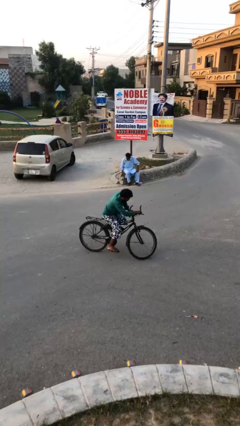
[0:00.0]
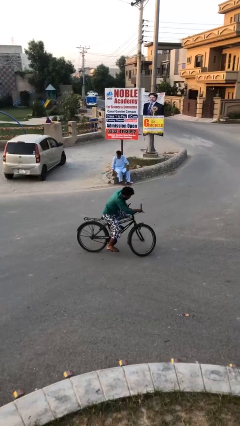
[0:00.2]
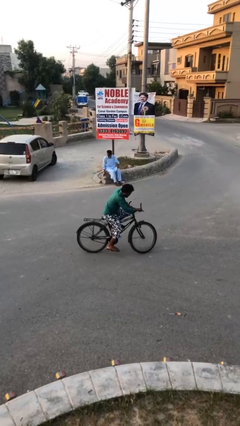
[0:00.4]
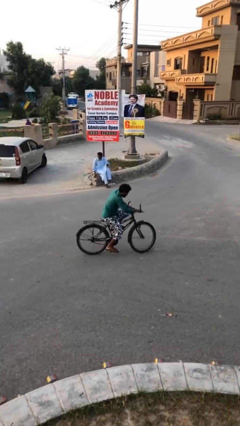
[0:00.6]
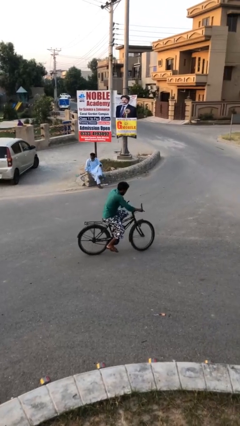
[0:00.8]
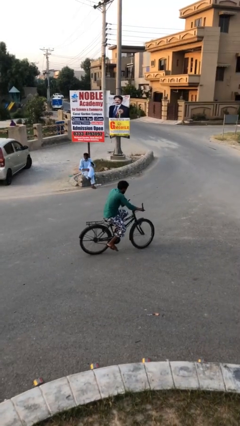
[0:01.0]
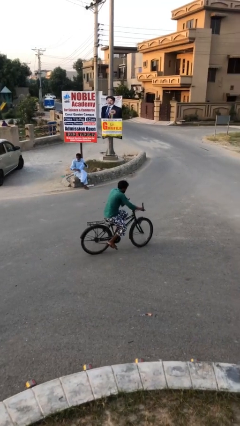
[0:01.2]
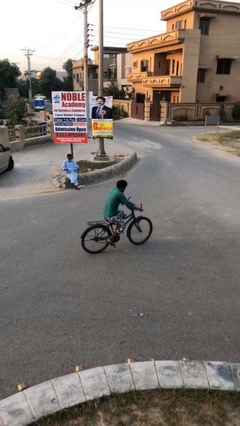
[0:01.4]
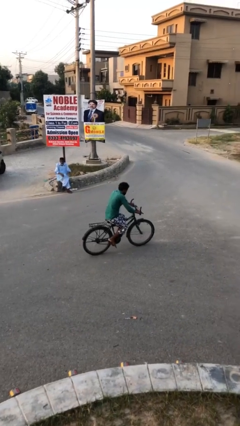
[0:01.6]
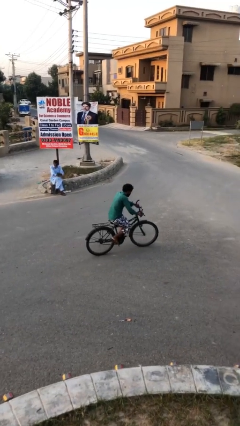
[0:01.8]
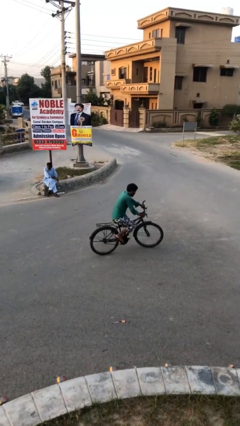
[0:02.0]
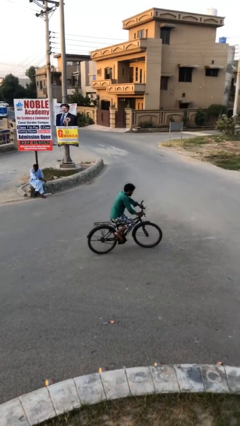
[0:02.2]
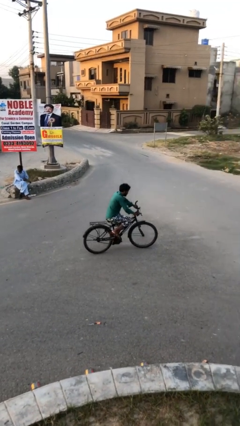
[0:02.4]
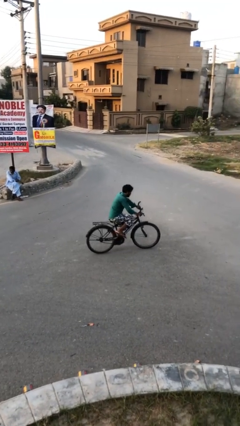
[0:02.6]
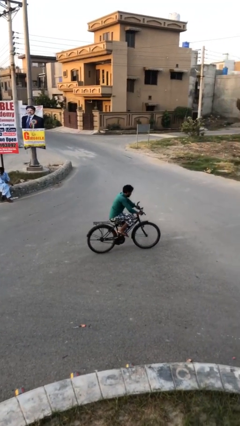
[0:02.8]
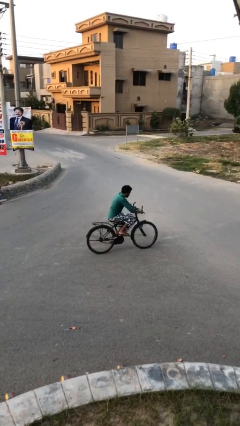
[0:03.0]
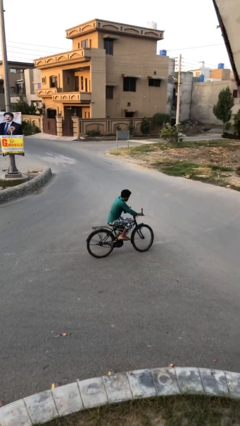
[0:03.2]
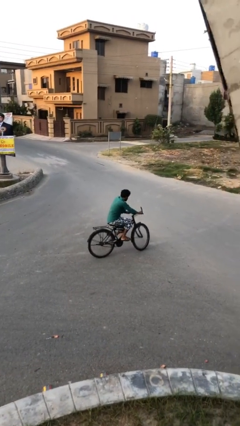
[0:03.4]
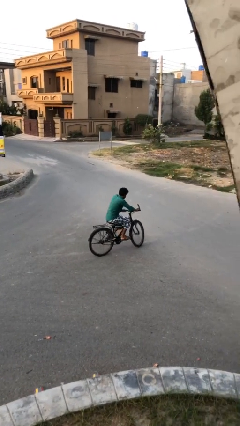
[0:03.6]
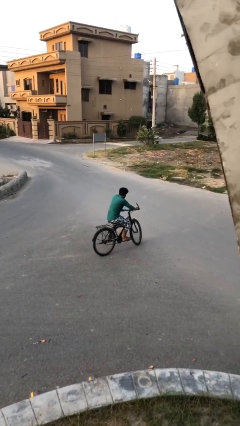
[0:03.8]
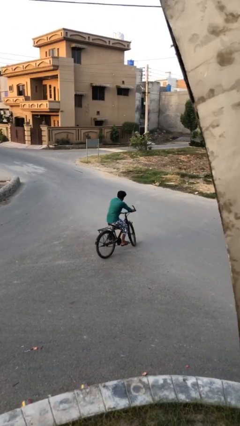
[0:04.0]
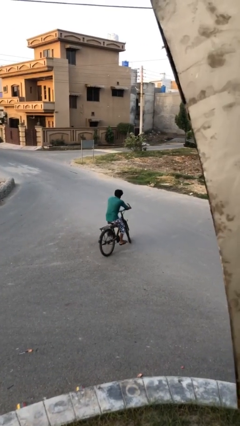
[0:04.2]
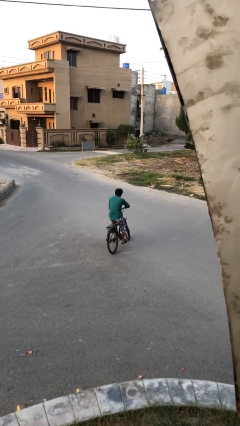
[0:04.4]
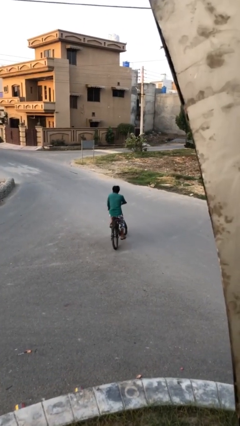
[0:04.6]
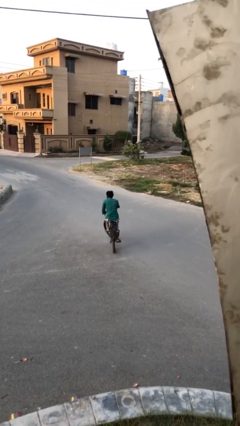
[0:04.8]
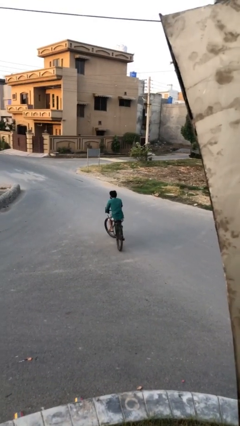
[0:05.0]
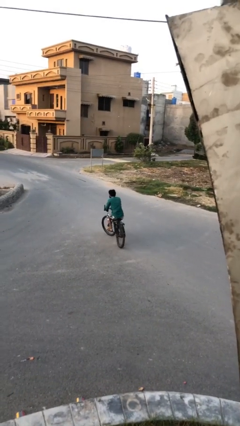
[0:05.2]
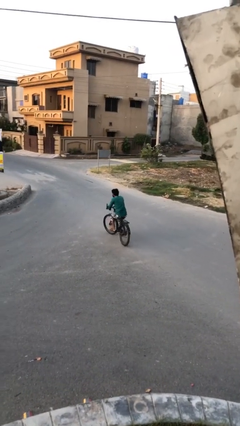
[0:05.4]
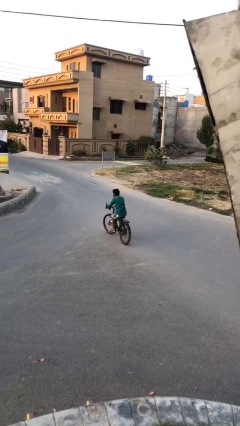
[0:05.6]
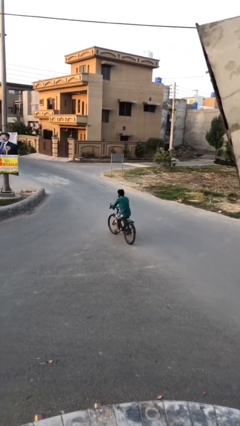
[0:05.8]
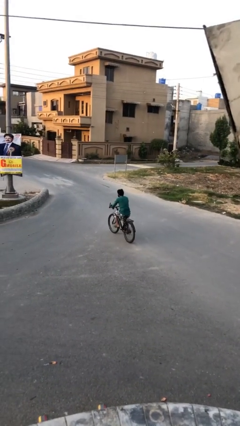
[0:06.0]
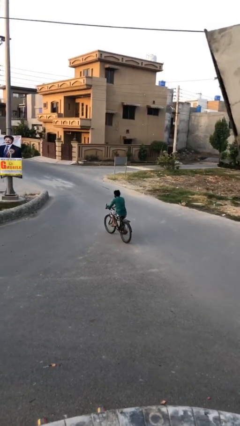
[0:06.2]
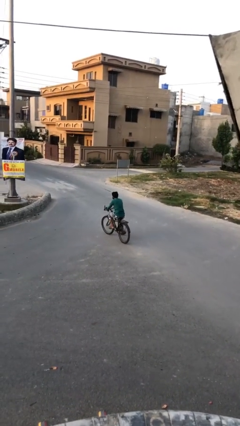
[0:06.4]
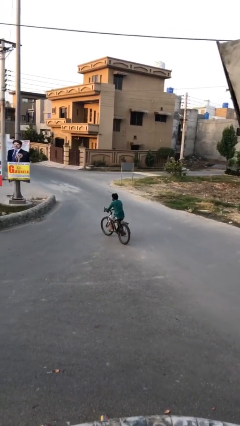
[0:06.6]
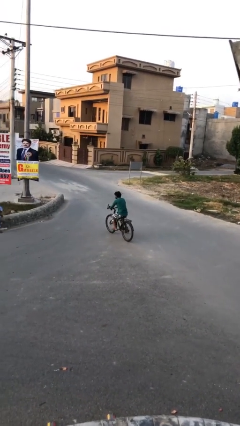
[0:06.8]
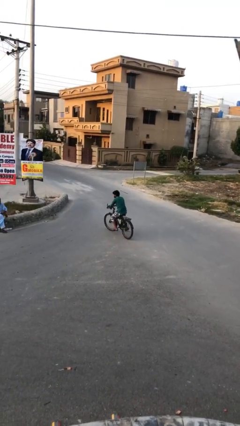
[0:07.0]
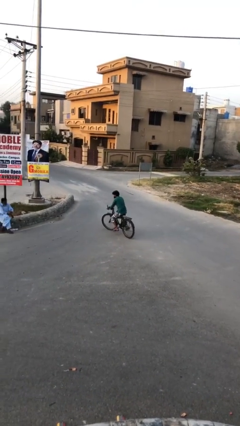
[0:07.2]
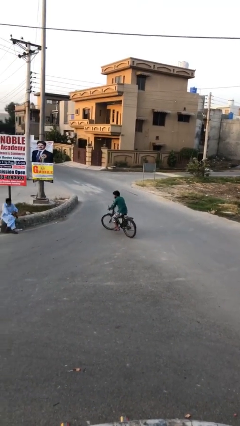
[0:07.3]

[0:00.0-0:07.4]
person rides bicycle

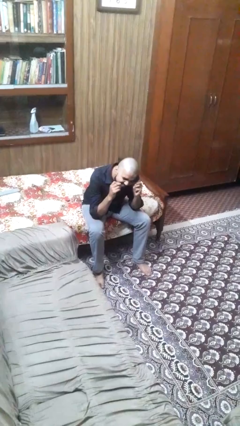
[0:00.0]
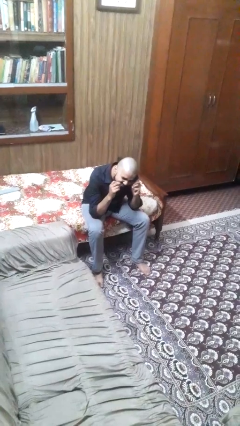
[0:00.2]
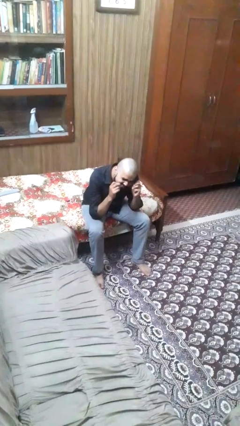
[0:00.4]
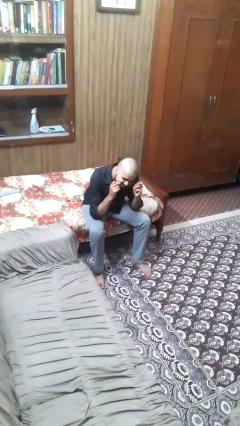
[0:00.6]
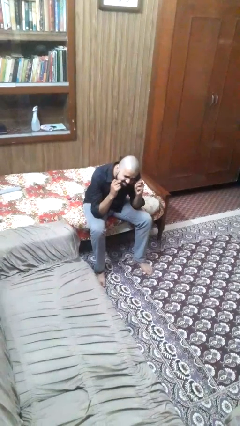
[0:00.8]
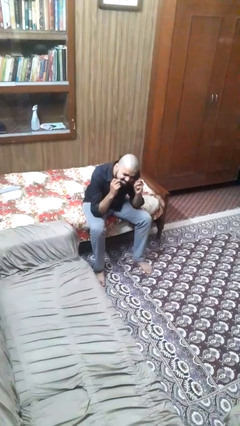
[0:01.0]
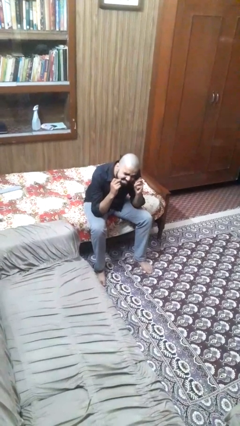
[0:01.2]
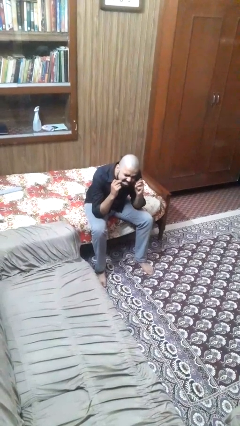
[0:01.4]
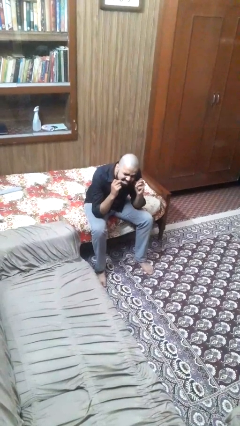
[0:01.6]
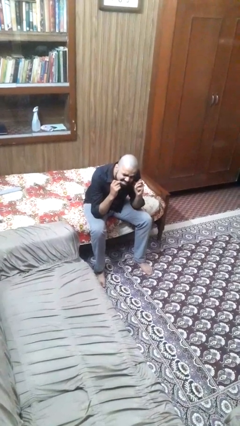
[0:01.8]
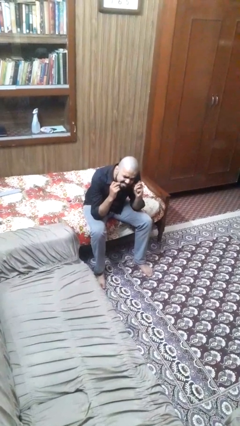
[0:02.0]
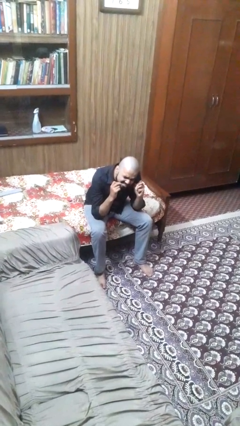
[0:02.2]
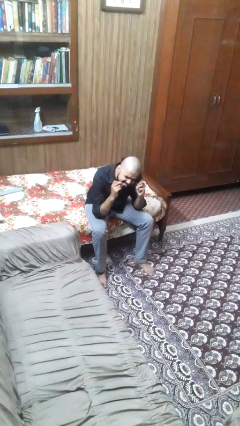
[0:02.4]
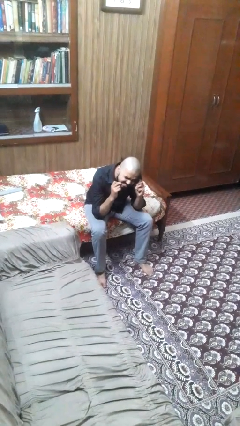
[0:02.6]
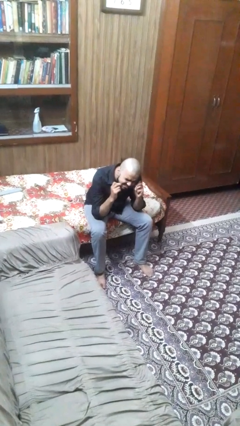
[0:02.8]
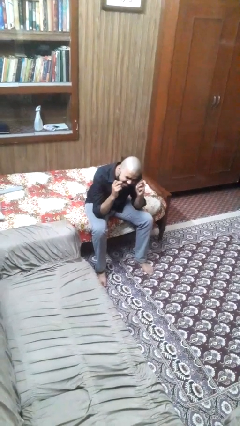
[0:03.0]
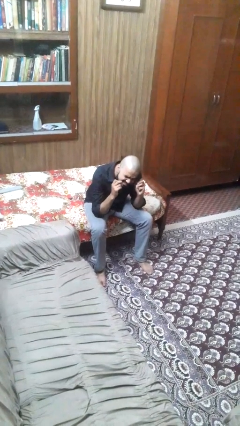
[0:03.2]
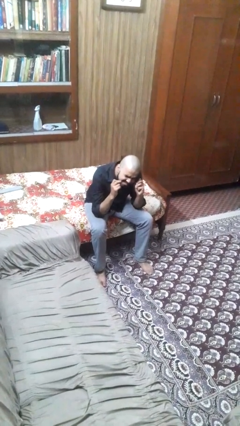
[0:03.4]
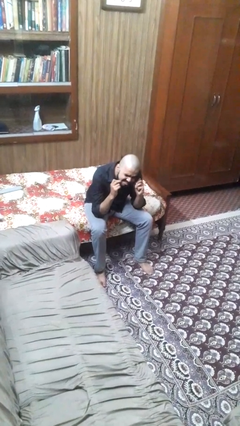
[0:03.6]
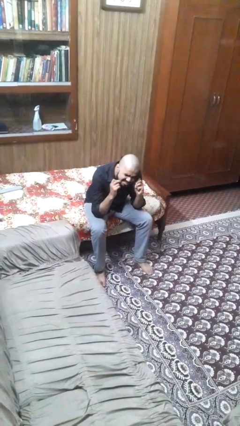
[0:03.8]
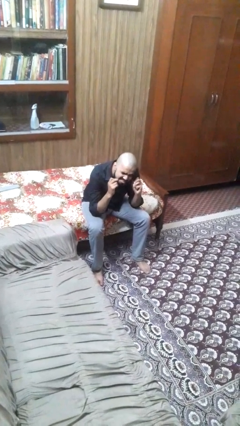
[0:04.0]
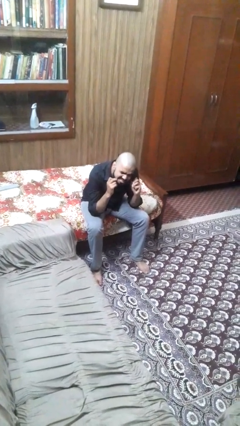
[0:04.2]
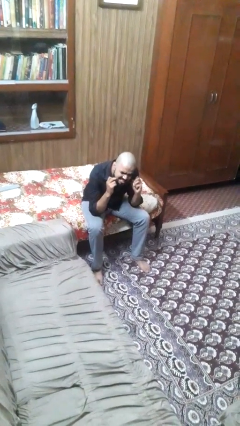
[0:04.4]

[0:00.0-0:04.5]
person flosses

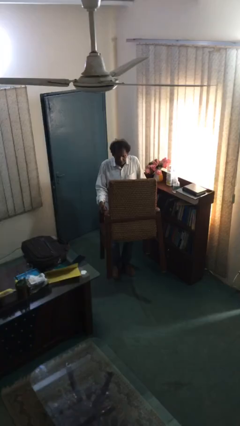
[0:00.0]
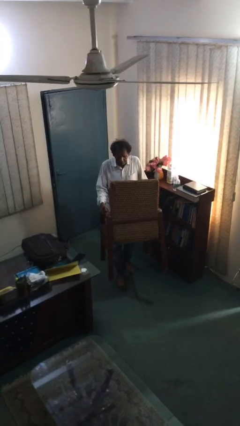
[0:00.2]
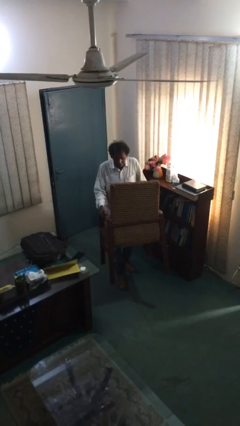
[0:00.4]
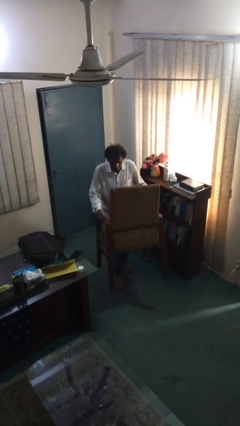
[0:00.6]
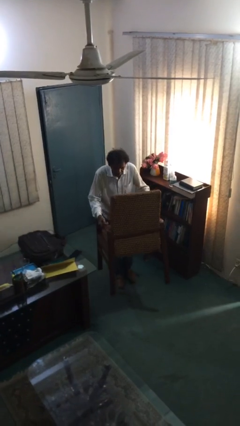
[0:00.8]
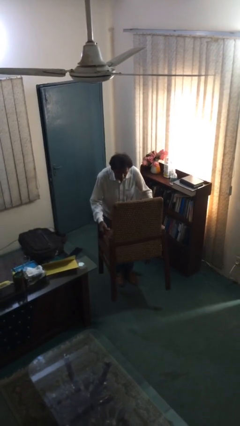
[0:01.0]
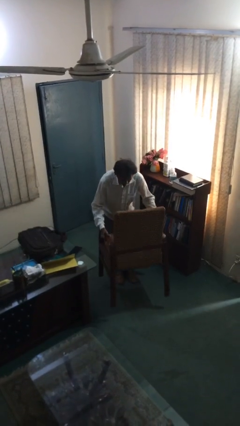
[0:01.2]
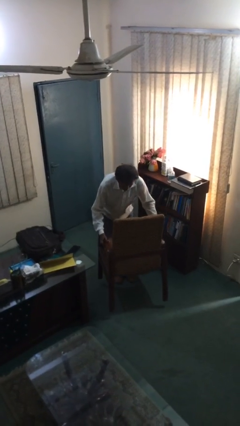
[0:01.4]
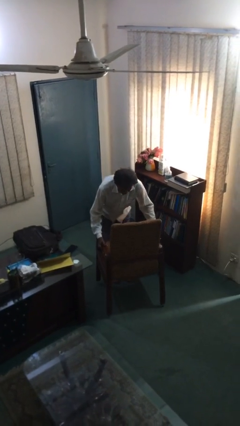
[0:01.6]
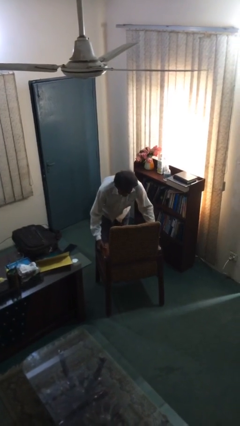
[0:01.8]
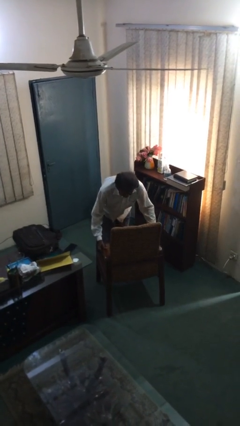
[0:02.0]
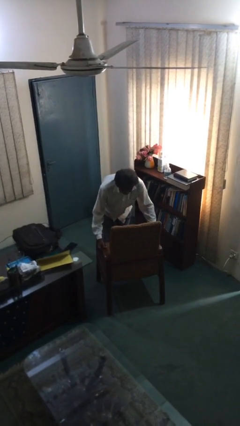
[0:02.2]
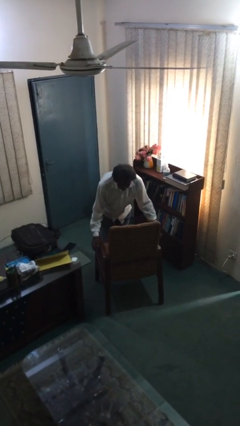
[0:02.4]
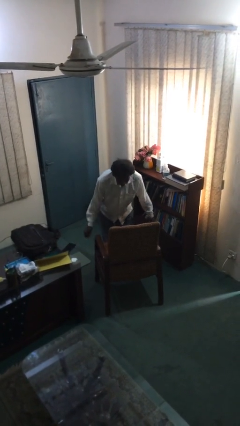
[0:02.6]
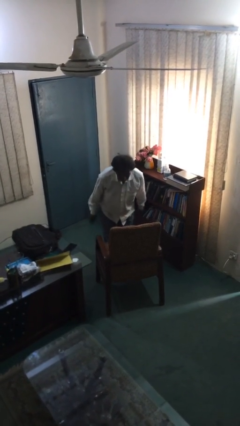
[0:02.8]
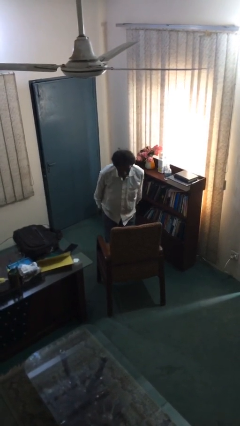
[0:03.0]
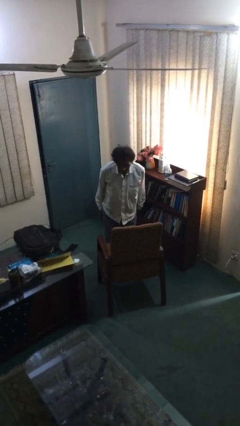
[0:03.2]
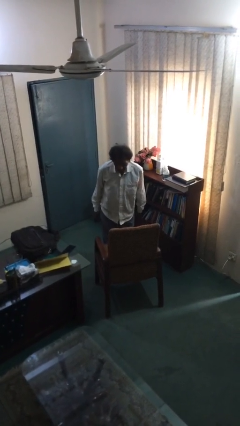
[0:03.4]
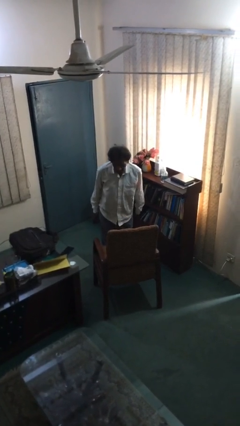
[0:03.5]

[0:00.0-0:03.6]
person puts down object on floor

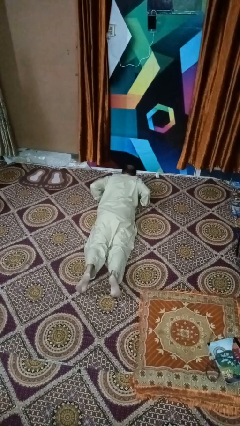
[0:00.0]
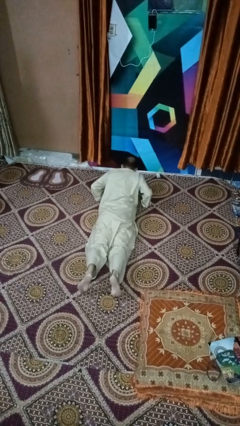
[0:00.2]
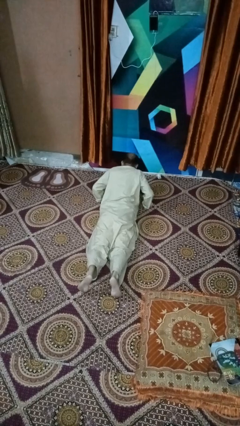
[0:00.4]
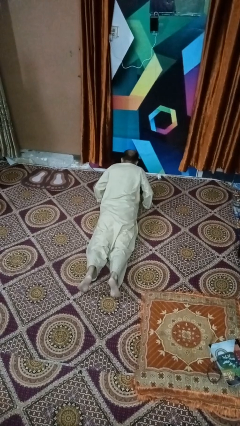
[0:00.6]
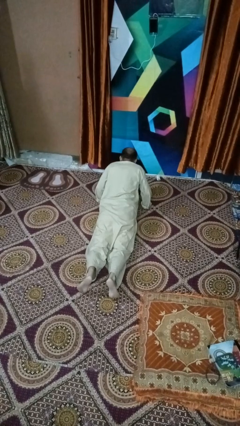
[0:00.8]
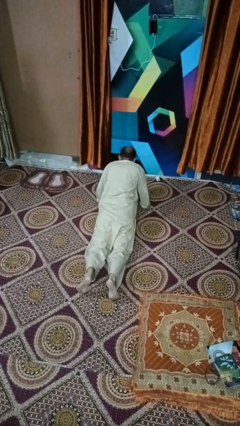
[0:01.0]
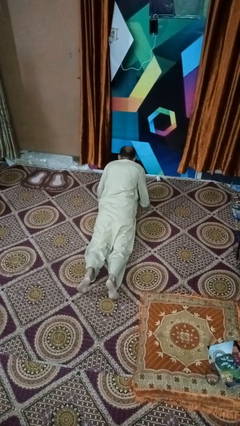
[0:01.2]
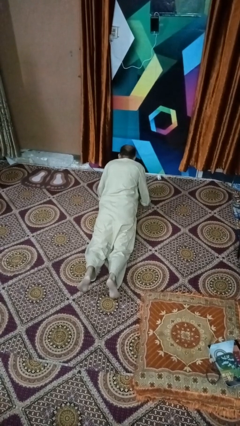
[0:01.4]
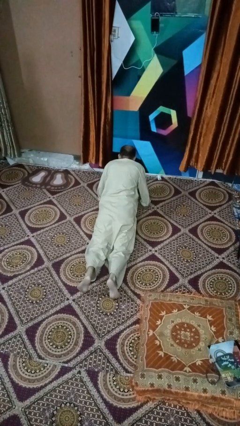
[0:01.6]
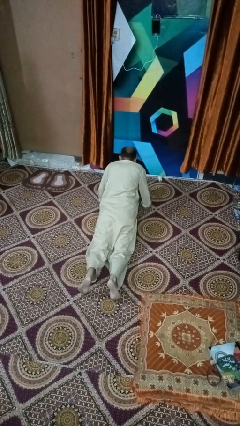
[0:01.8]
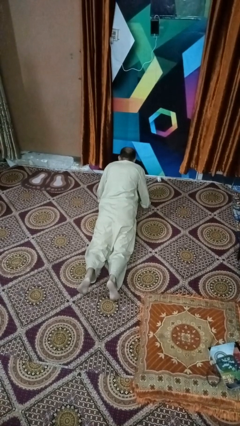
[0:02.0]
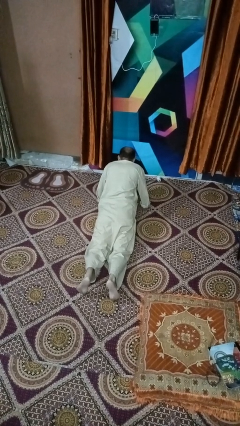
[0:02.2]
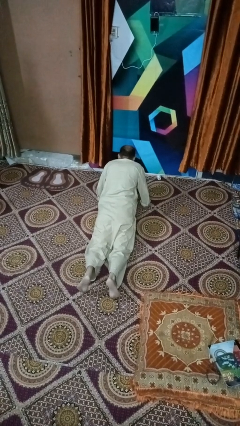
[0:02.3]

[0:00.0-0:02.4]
person exercises with situp
